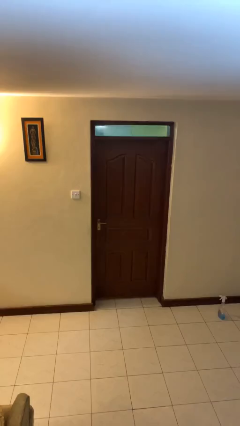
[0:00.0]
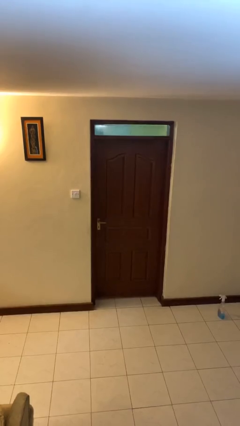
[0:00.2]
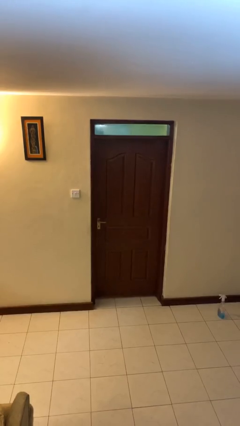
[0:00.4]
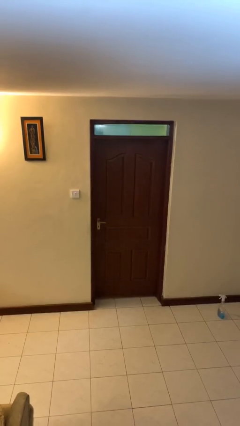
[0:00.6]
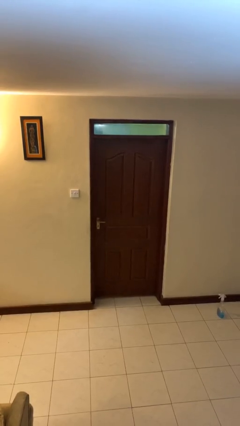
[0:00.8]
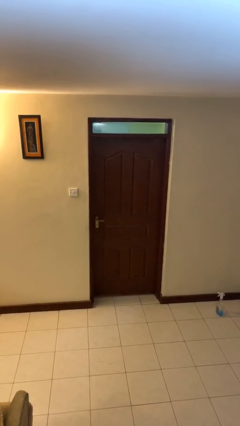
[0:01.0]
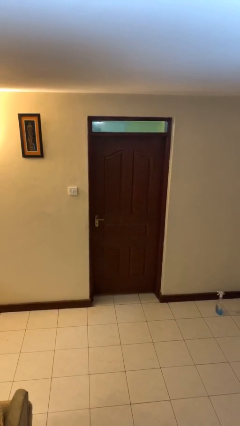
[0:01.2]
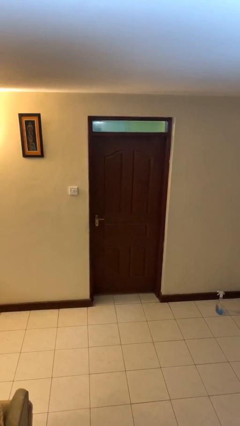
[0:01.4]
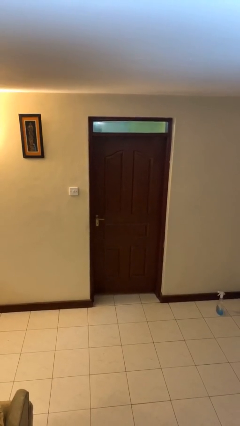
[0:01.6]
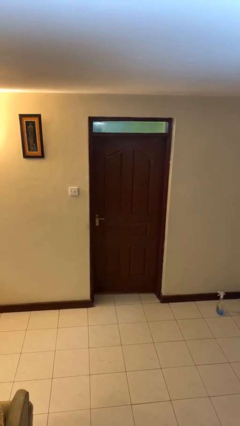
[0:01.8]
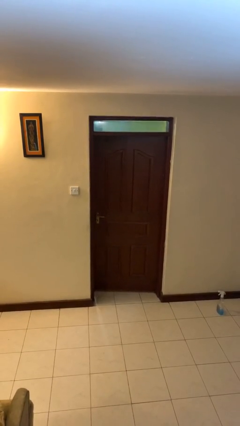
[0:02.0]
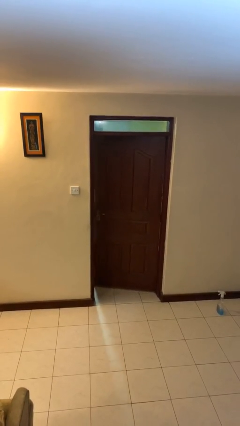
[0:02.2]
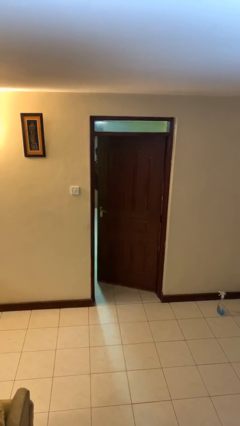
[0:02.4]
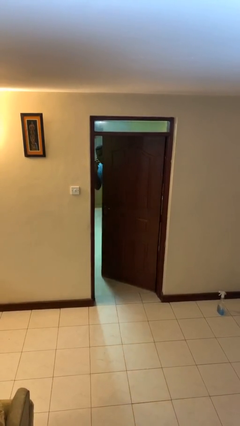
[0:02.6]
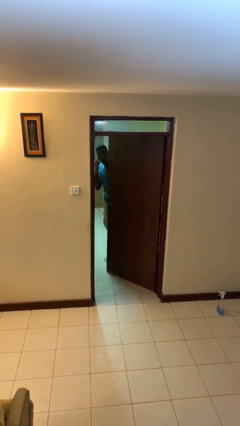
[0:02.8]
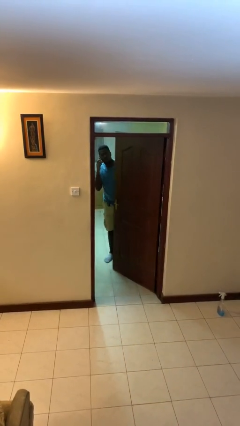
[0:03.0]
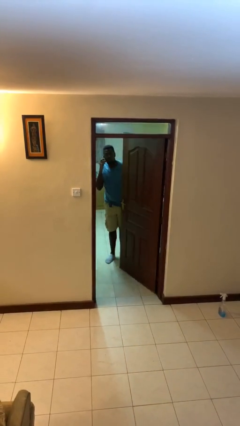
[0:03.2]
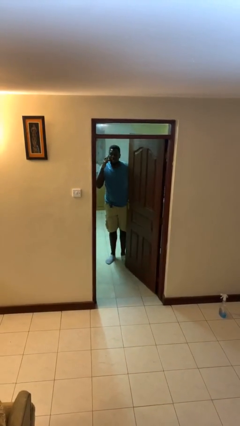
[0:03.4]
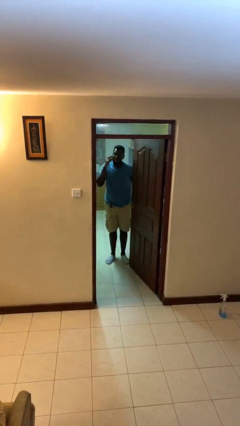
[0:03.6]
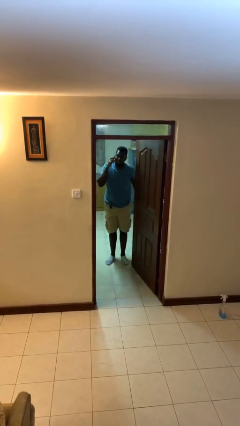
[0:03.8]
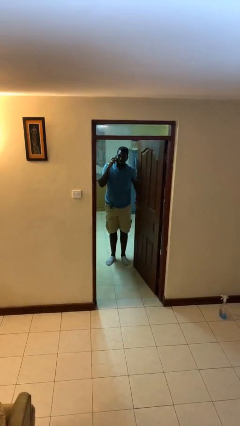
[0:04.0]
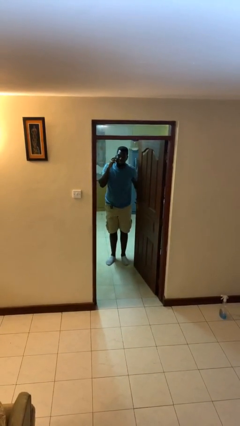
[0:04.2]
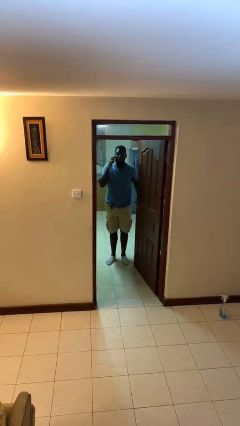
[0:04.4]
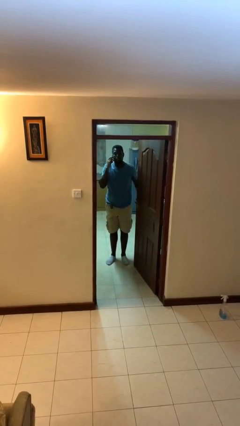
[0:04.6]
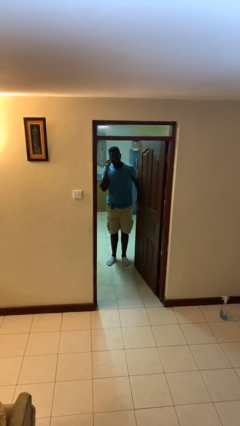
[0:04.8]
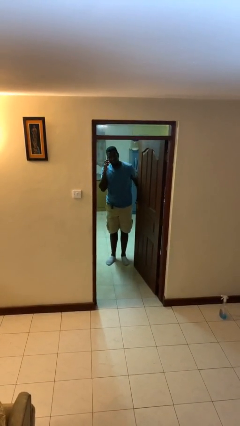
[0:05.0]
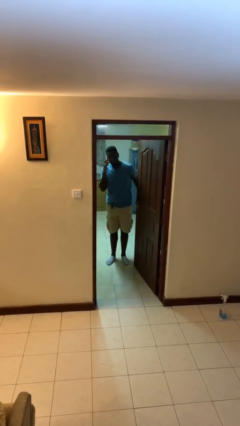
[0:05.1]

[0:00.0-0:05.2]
person opens facility door

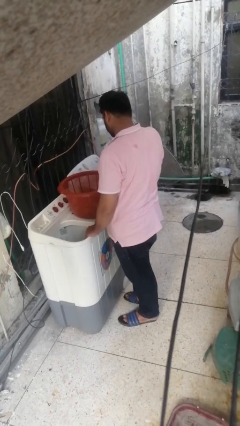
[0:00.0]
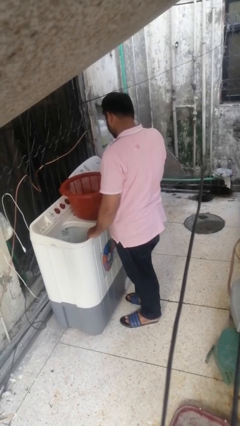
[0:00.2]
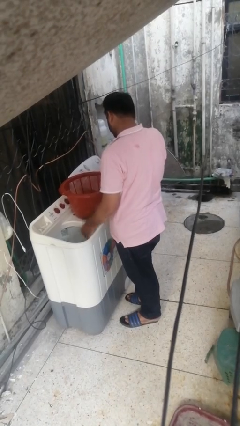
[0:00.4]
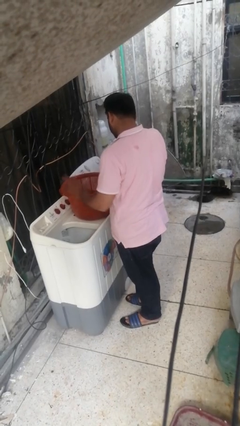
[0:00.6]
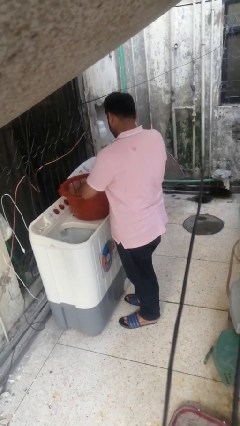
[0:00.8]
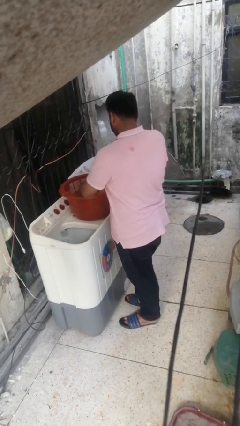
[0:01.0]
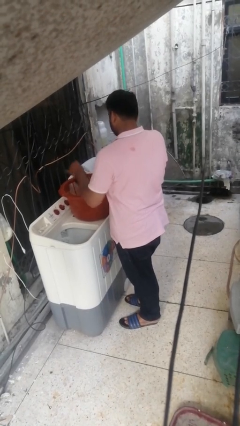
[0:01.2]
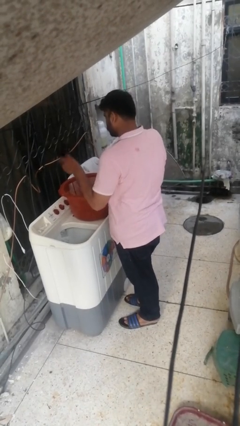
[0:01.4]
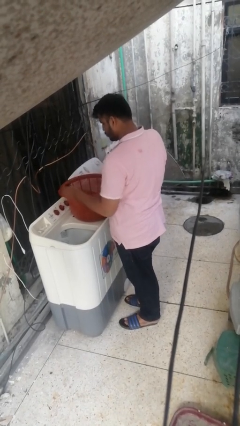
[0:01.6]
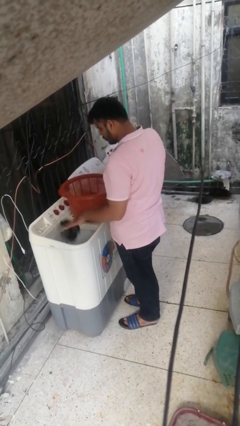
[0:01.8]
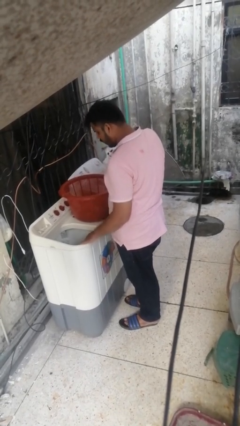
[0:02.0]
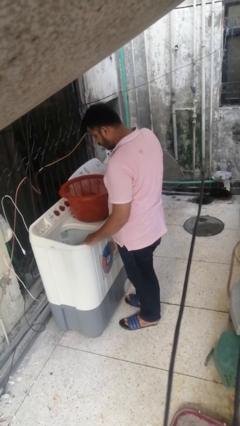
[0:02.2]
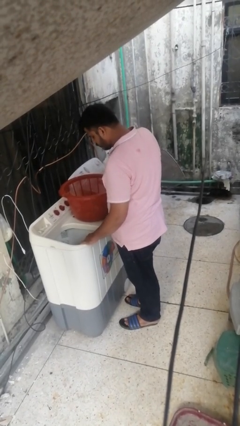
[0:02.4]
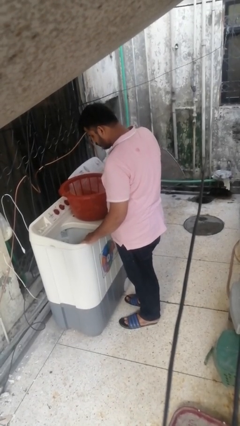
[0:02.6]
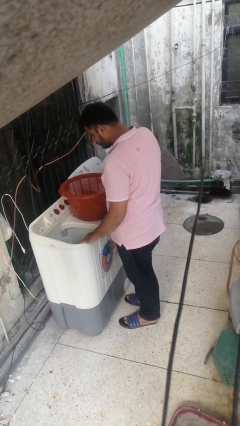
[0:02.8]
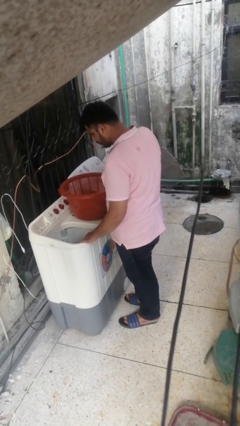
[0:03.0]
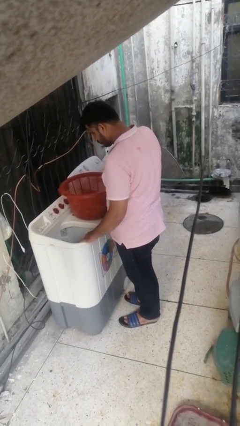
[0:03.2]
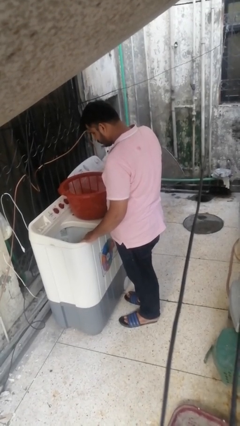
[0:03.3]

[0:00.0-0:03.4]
person loads clotheswasher

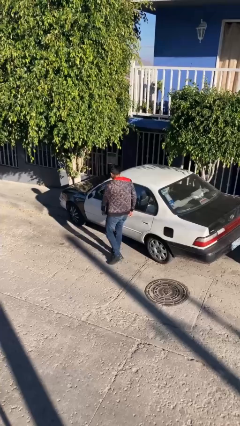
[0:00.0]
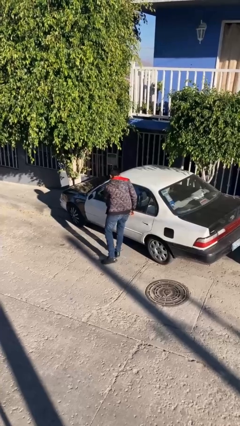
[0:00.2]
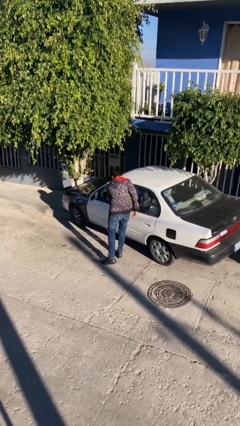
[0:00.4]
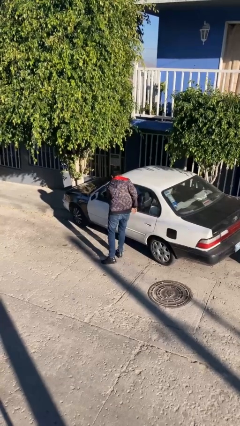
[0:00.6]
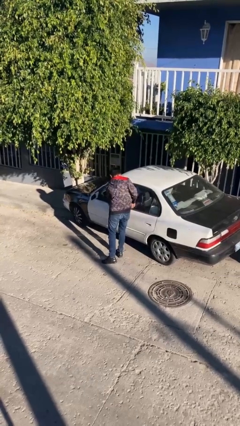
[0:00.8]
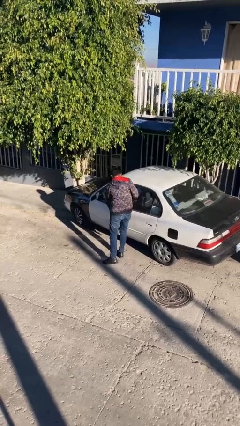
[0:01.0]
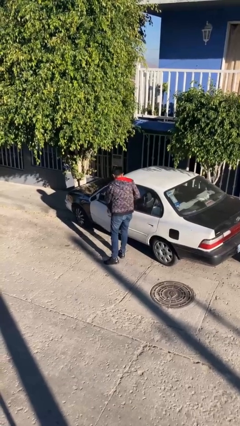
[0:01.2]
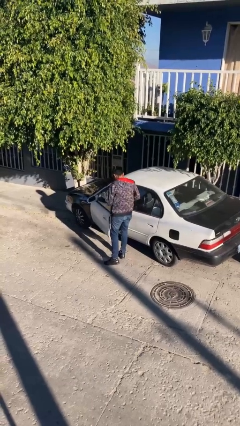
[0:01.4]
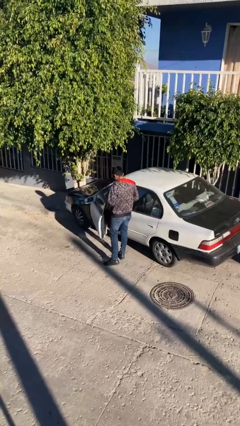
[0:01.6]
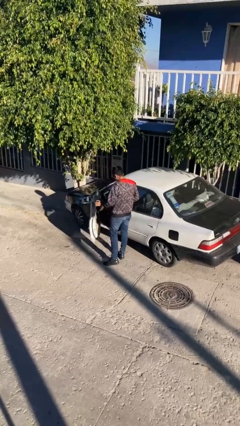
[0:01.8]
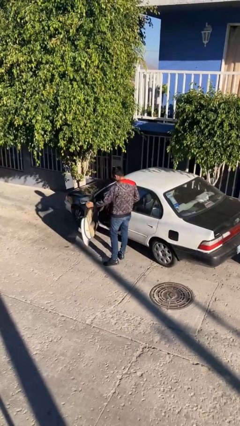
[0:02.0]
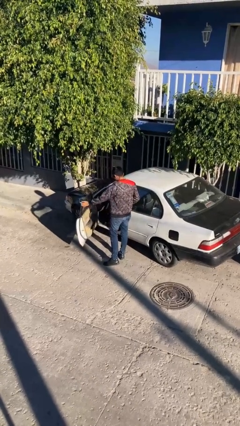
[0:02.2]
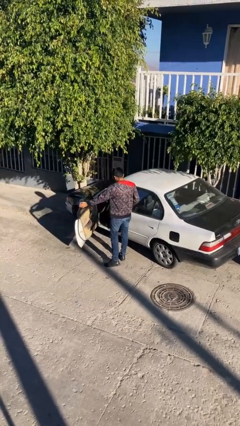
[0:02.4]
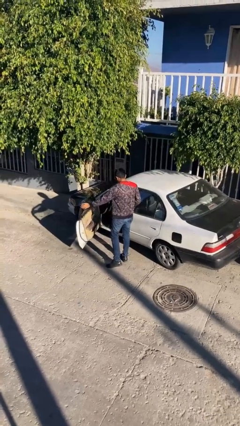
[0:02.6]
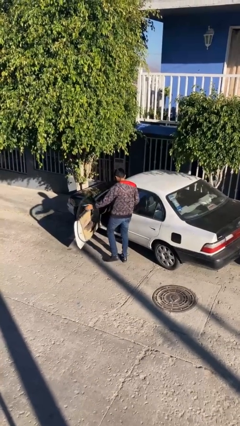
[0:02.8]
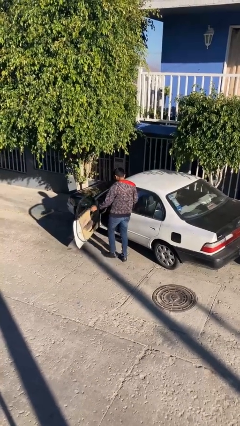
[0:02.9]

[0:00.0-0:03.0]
person opens car door

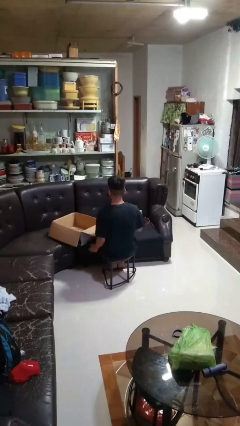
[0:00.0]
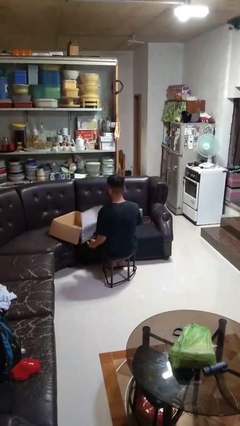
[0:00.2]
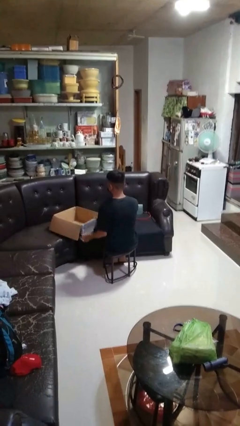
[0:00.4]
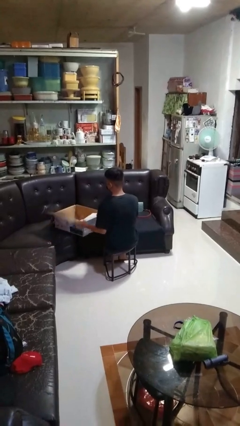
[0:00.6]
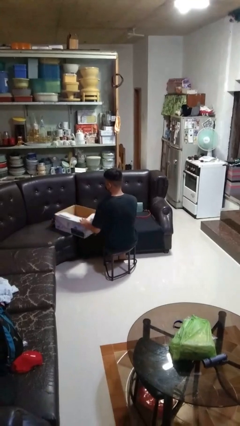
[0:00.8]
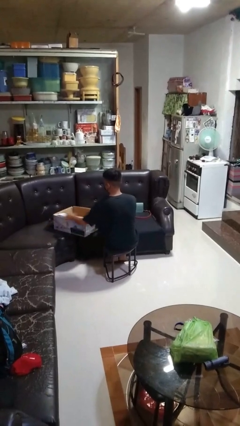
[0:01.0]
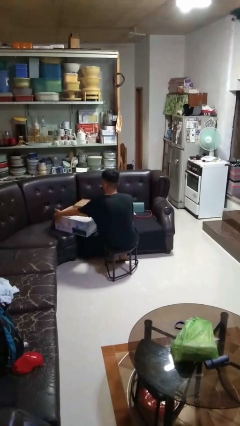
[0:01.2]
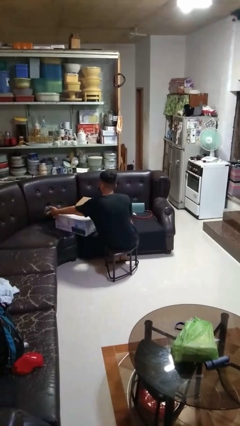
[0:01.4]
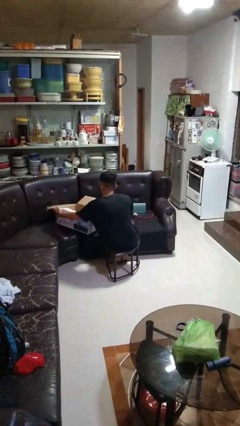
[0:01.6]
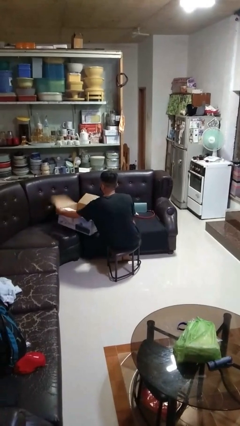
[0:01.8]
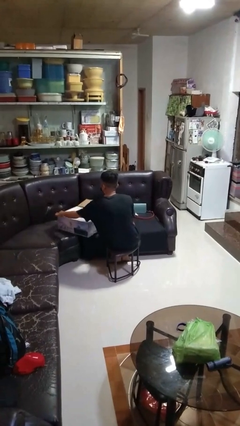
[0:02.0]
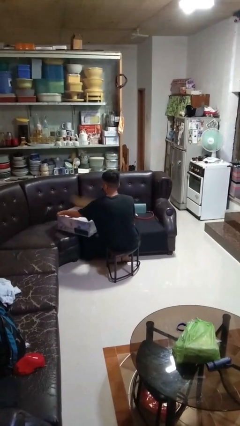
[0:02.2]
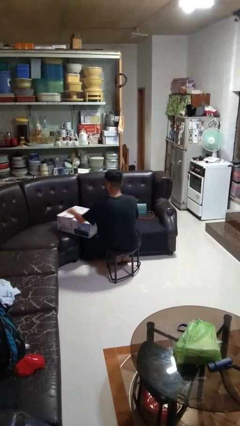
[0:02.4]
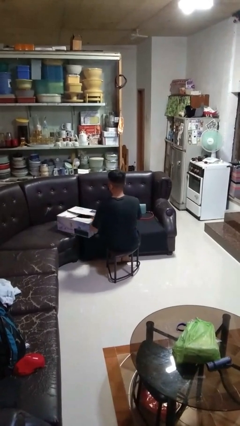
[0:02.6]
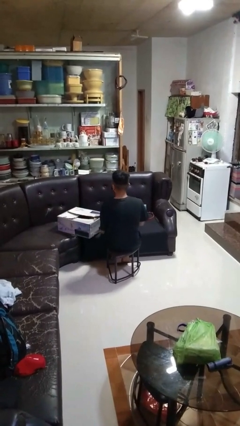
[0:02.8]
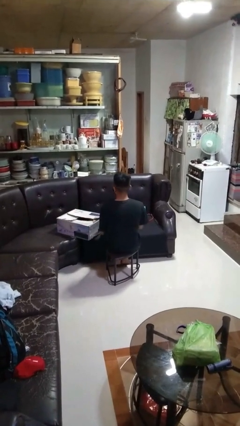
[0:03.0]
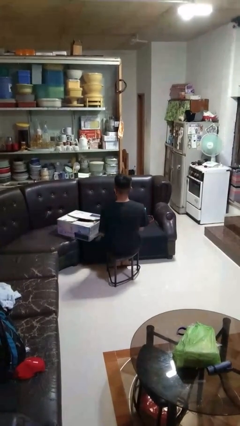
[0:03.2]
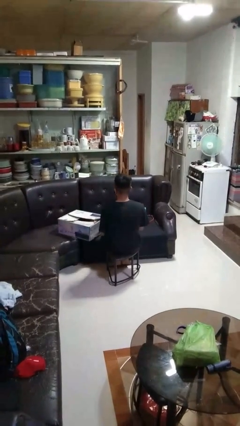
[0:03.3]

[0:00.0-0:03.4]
person closes box

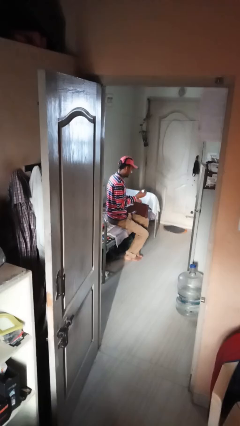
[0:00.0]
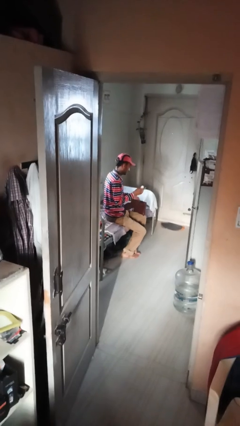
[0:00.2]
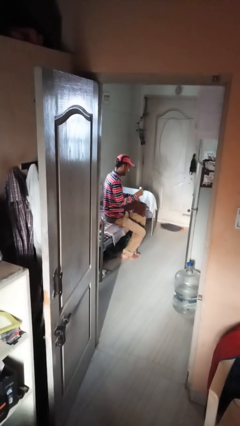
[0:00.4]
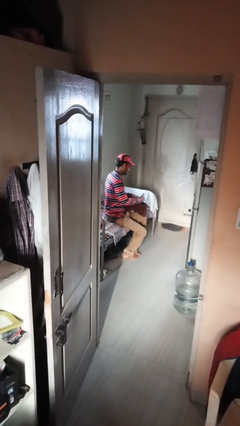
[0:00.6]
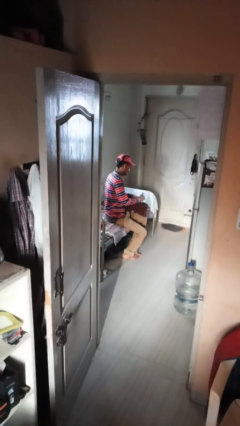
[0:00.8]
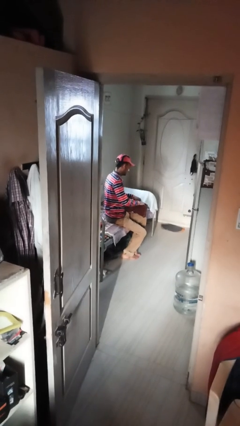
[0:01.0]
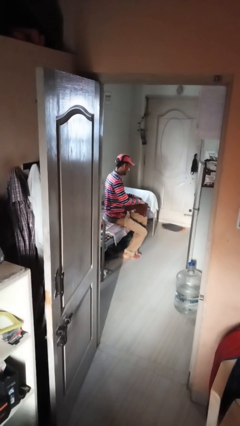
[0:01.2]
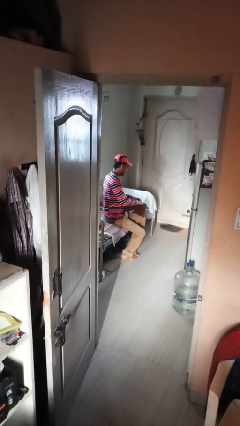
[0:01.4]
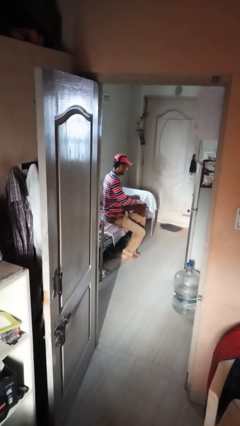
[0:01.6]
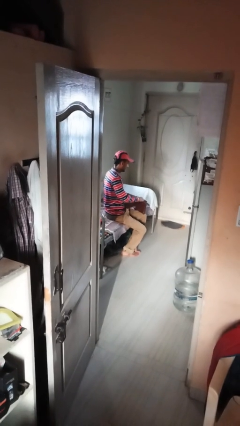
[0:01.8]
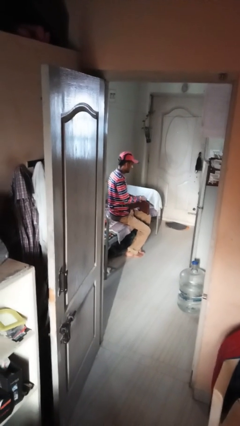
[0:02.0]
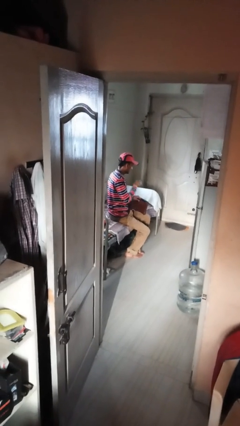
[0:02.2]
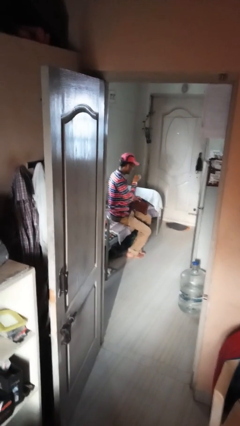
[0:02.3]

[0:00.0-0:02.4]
person puts object into purse
